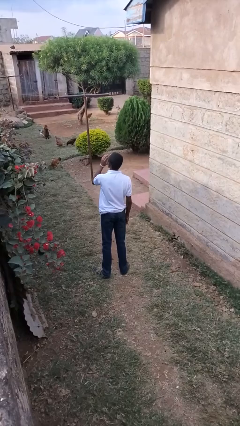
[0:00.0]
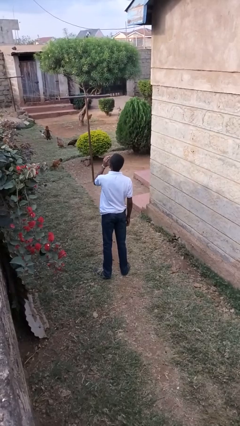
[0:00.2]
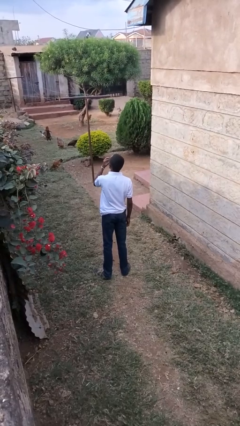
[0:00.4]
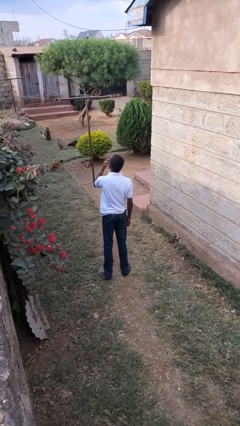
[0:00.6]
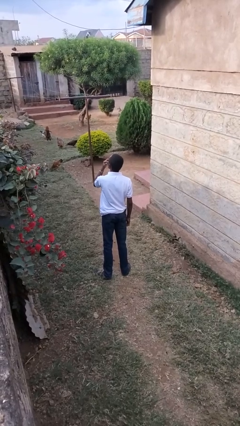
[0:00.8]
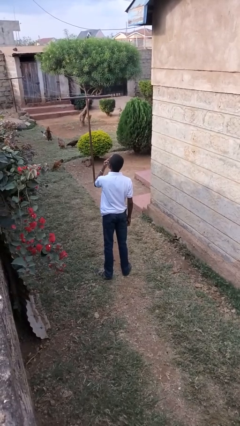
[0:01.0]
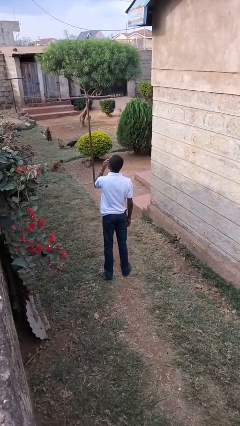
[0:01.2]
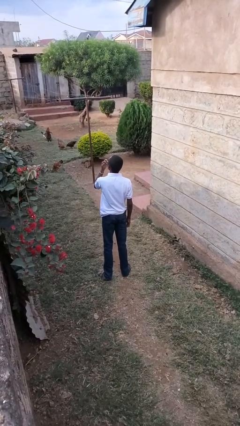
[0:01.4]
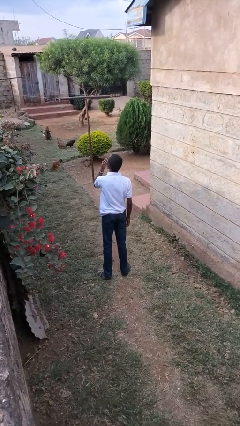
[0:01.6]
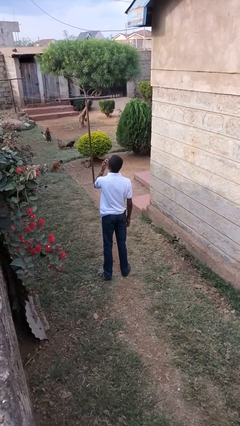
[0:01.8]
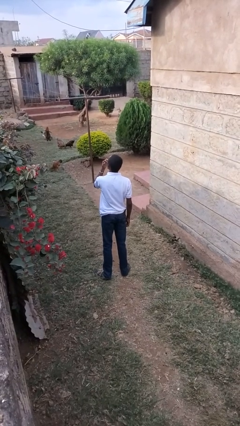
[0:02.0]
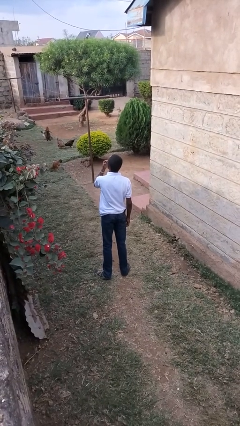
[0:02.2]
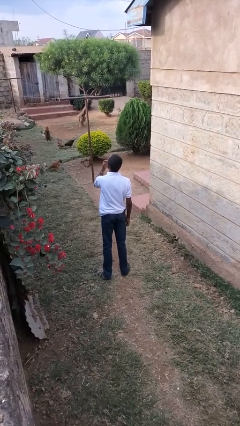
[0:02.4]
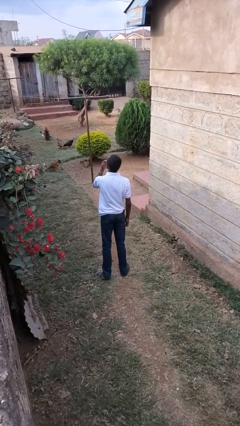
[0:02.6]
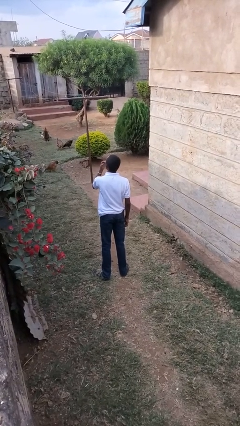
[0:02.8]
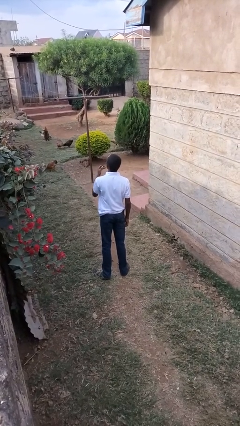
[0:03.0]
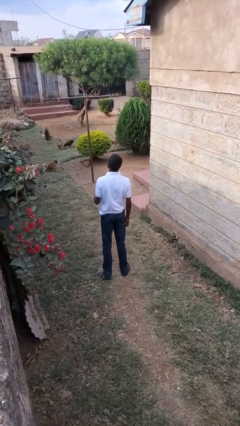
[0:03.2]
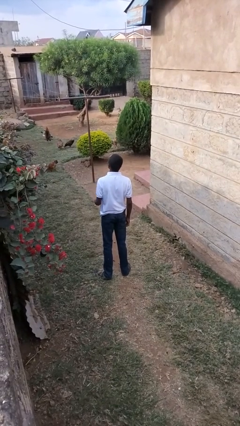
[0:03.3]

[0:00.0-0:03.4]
person licks fingers

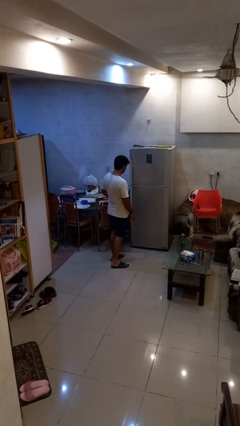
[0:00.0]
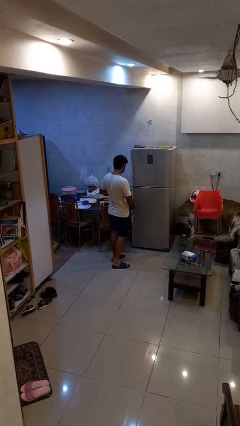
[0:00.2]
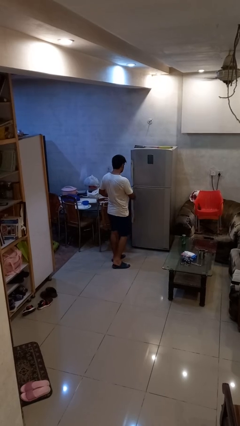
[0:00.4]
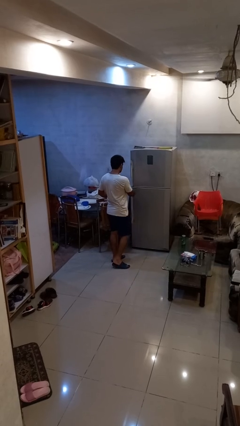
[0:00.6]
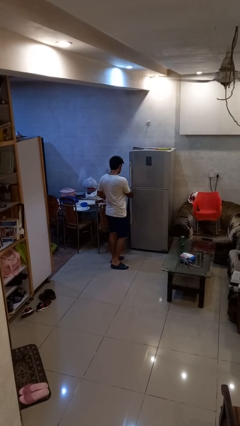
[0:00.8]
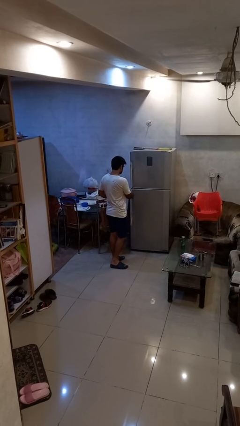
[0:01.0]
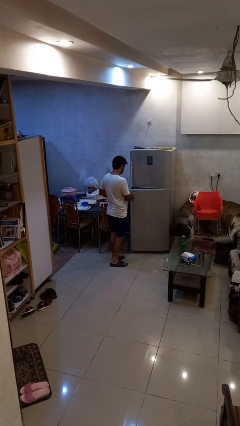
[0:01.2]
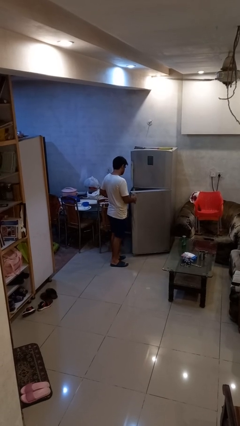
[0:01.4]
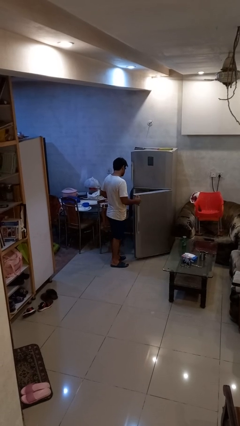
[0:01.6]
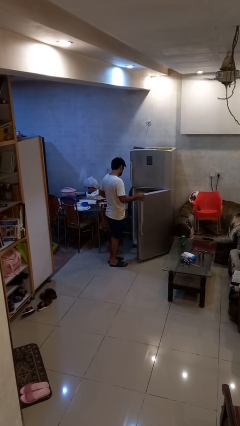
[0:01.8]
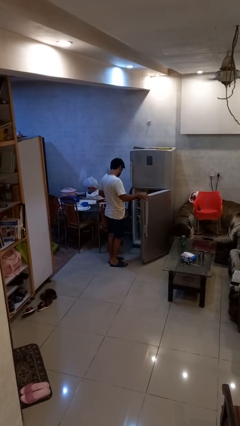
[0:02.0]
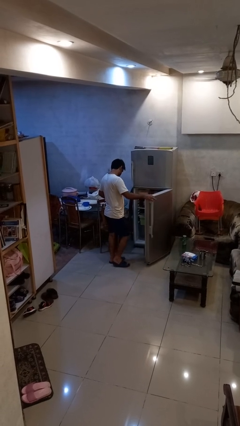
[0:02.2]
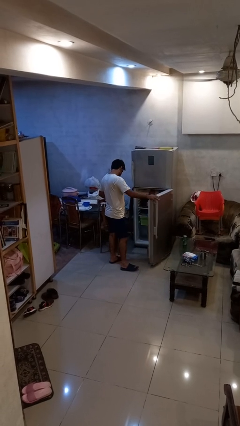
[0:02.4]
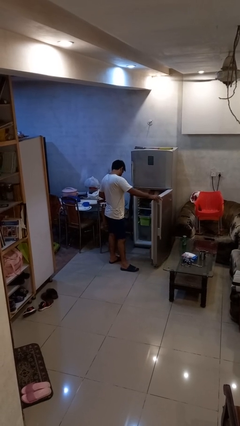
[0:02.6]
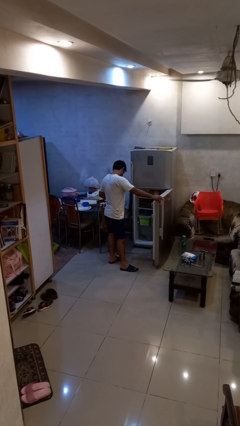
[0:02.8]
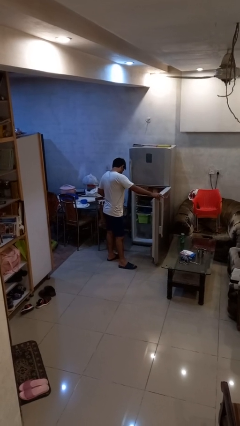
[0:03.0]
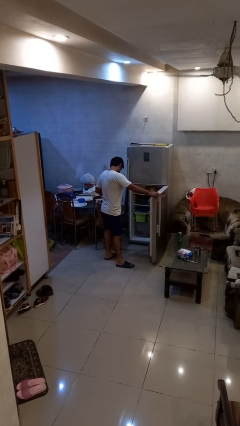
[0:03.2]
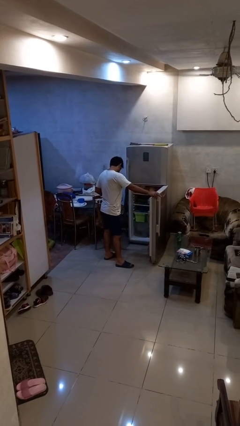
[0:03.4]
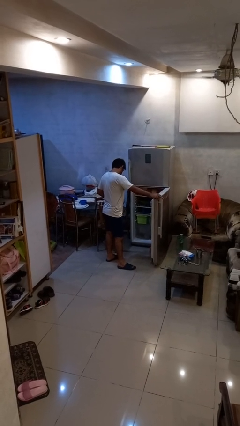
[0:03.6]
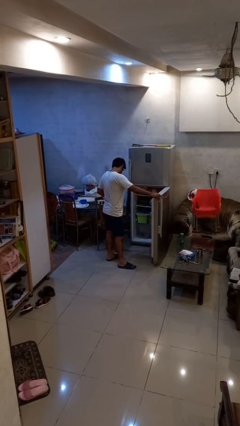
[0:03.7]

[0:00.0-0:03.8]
person opens refrigerator

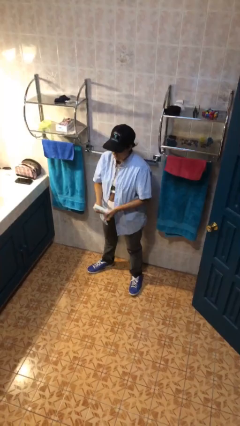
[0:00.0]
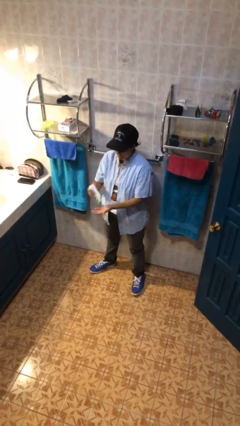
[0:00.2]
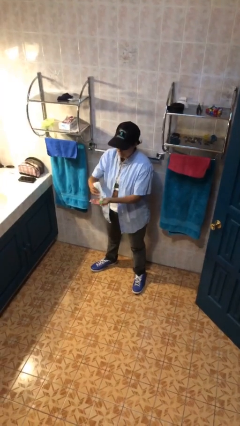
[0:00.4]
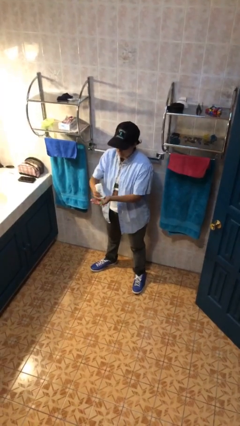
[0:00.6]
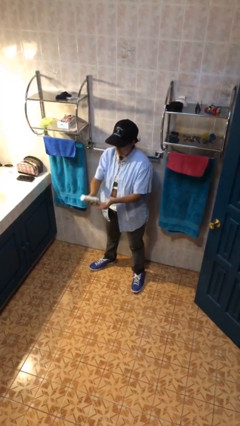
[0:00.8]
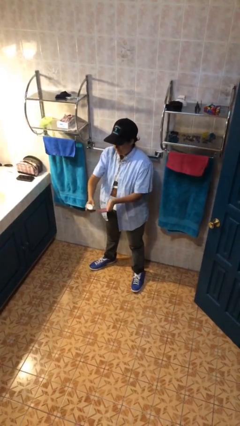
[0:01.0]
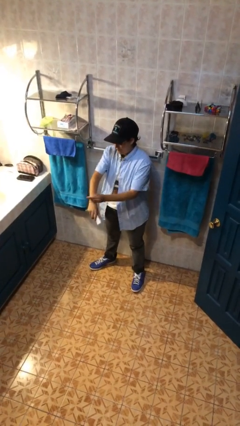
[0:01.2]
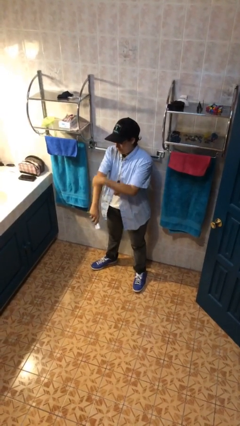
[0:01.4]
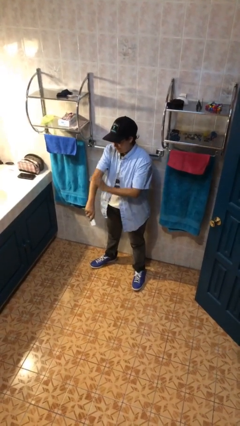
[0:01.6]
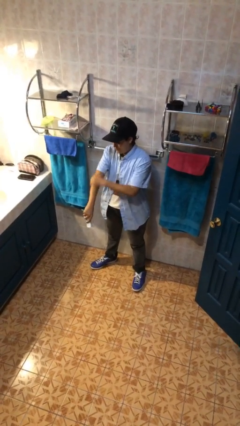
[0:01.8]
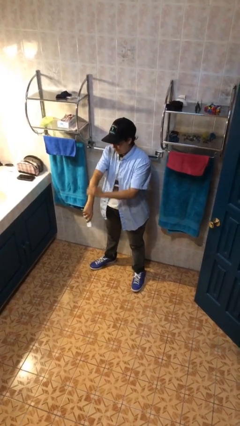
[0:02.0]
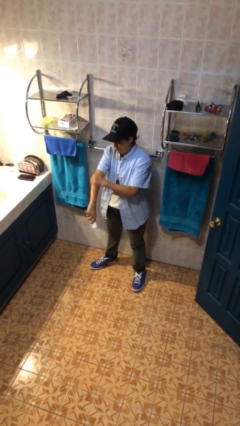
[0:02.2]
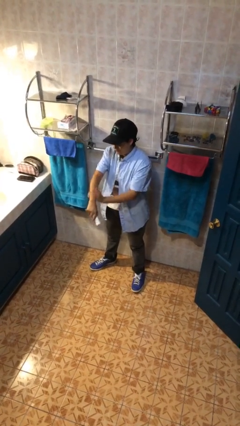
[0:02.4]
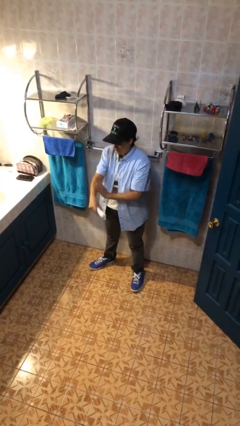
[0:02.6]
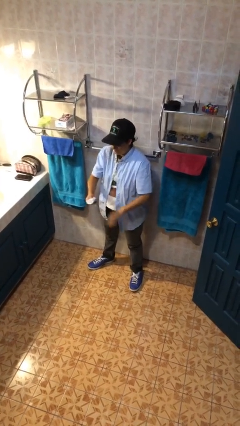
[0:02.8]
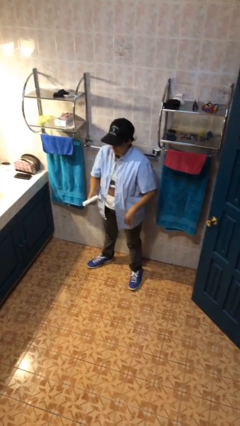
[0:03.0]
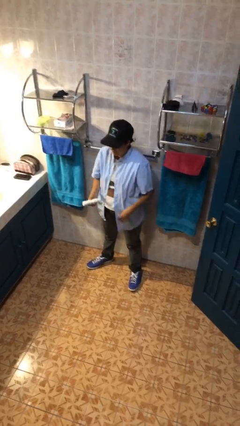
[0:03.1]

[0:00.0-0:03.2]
person applies sunscreen

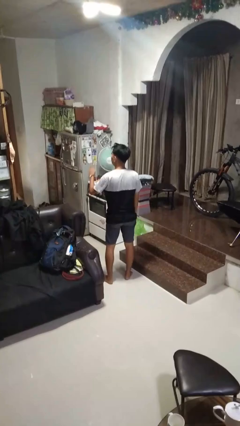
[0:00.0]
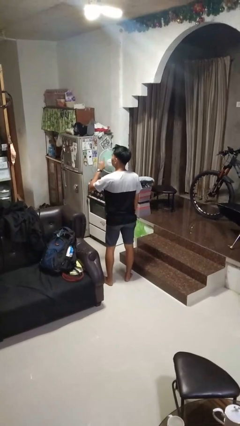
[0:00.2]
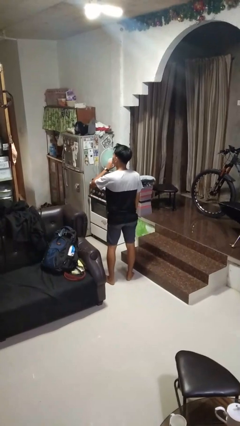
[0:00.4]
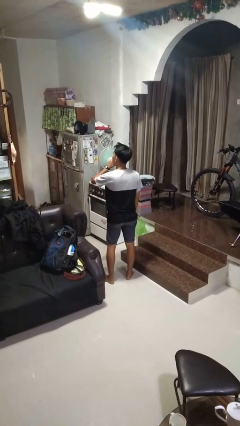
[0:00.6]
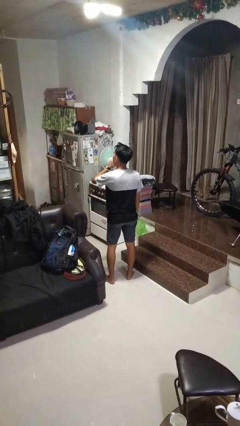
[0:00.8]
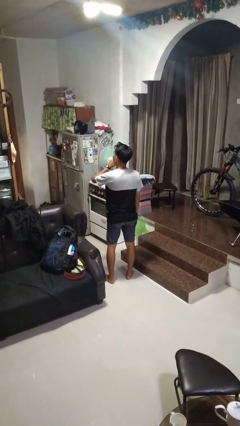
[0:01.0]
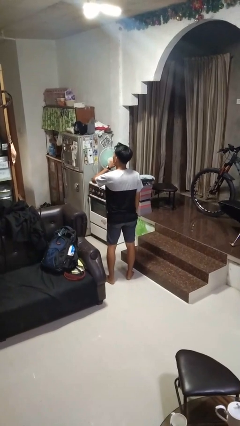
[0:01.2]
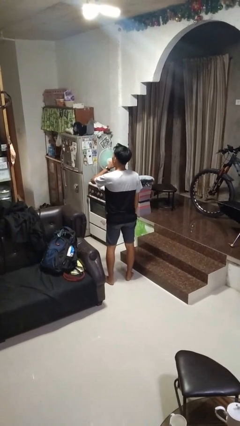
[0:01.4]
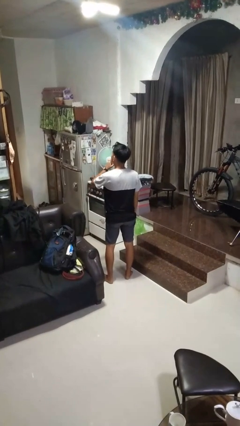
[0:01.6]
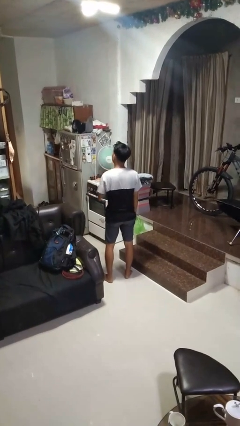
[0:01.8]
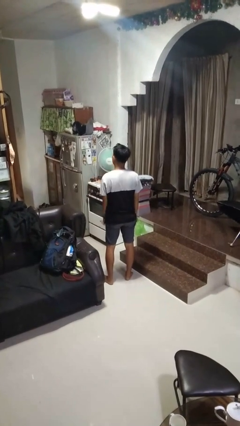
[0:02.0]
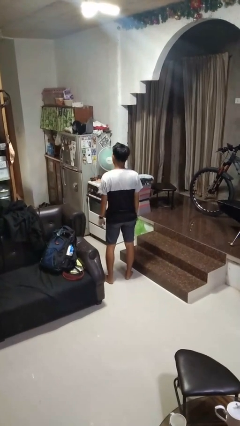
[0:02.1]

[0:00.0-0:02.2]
person gestures be quiet

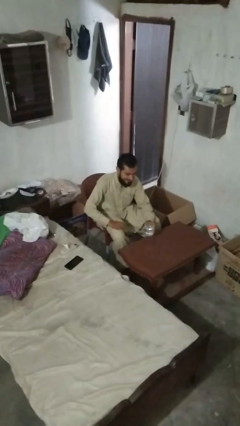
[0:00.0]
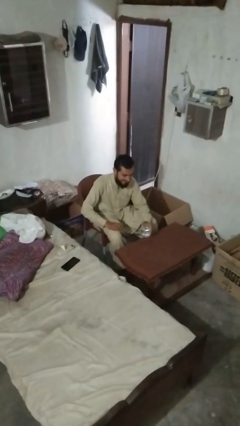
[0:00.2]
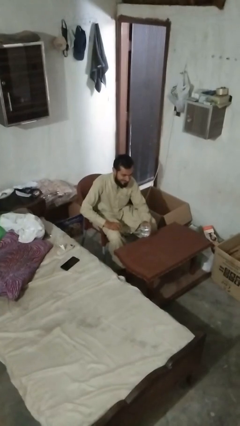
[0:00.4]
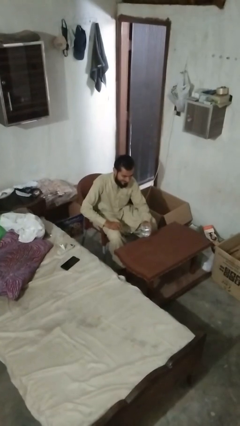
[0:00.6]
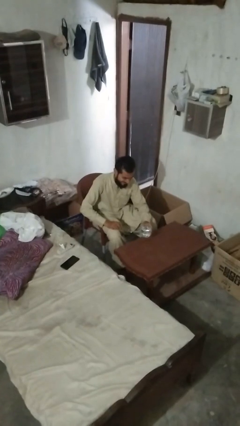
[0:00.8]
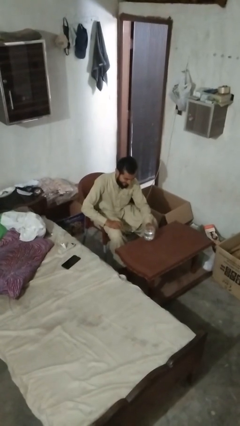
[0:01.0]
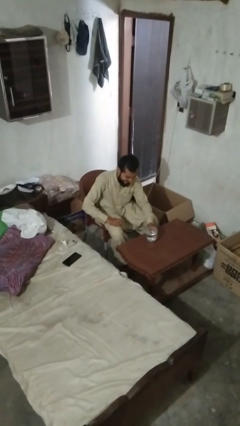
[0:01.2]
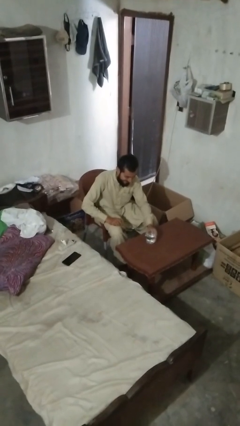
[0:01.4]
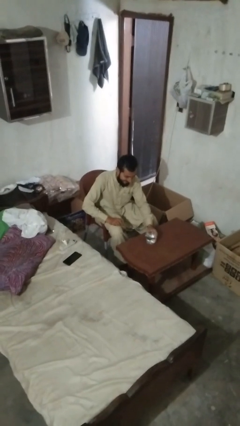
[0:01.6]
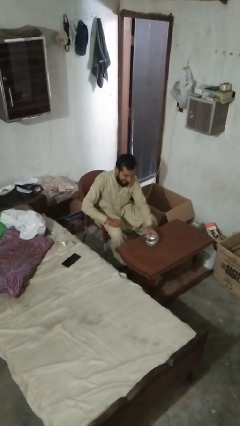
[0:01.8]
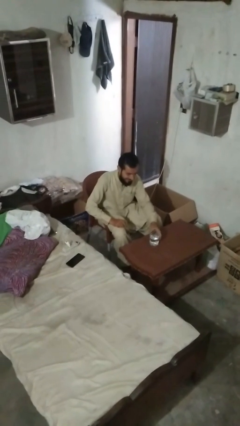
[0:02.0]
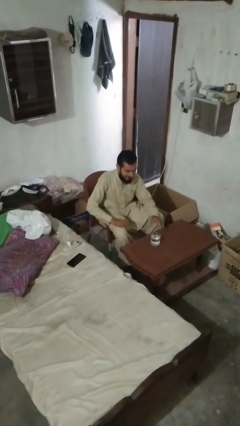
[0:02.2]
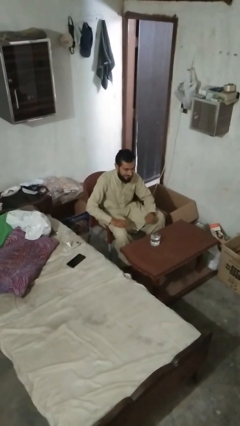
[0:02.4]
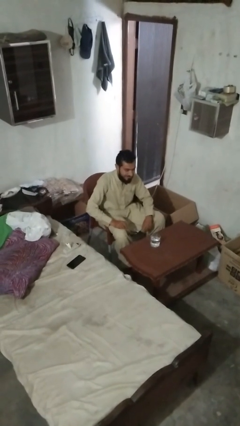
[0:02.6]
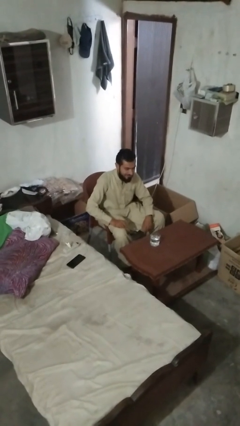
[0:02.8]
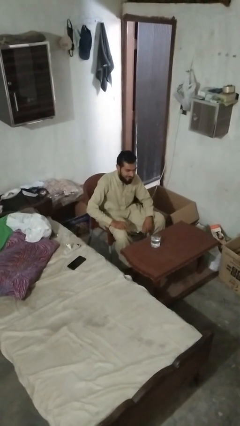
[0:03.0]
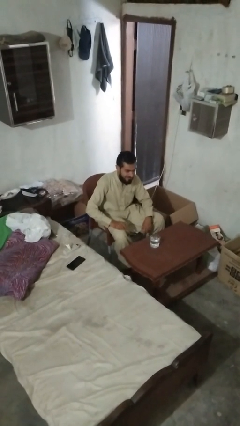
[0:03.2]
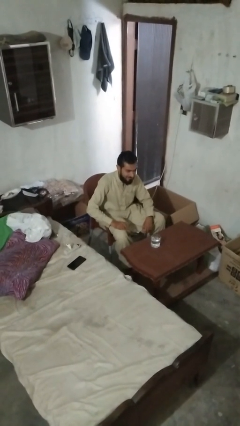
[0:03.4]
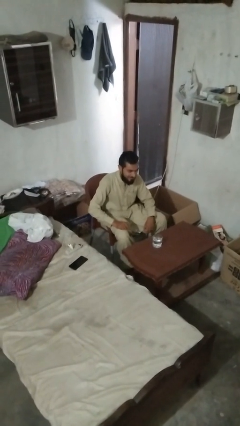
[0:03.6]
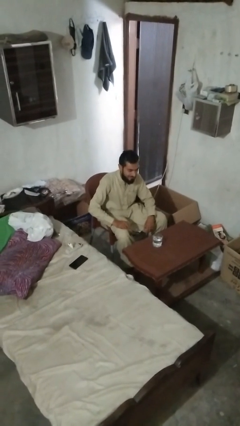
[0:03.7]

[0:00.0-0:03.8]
person sets upright glass

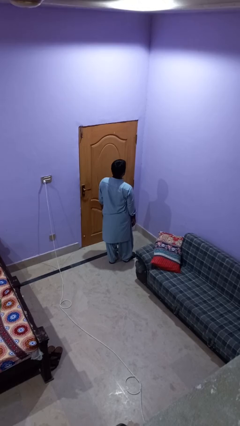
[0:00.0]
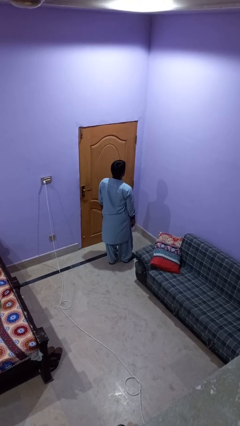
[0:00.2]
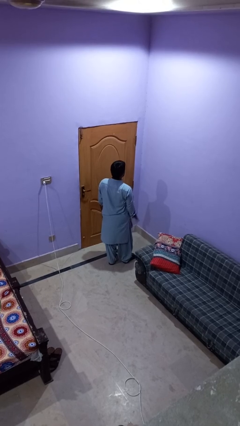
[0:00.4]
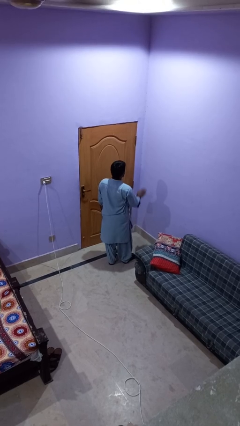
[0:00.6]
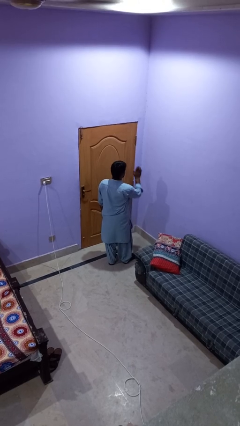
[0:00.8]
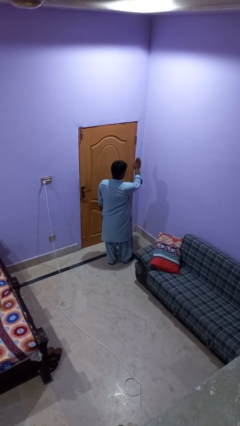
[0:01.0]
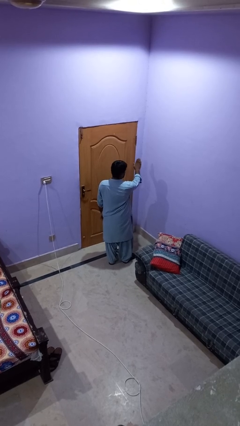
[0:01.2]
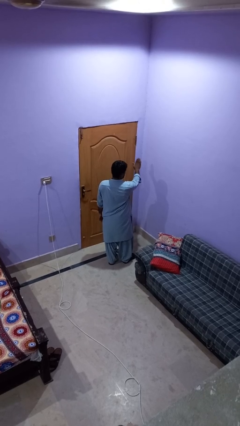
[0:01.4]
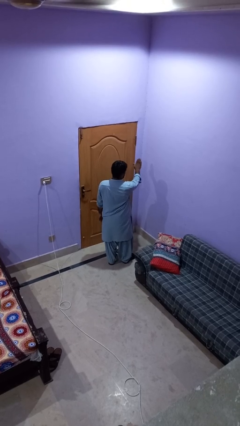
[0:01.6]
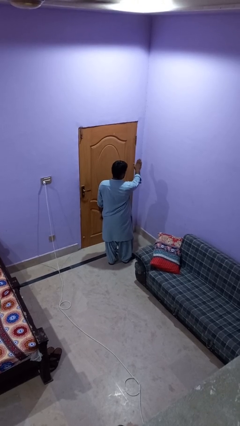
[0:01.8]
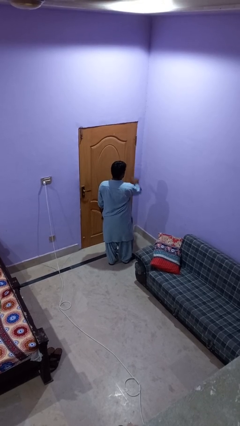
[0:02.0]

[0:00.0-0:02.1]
person gestures stop
